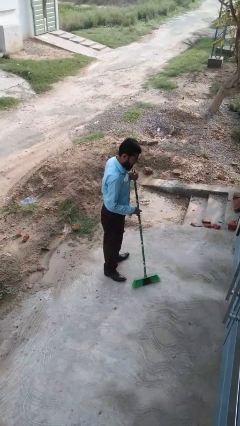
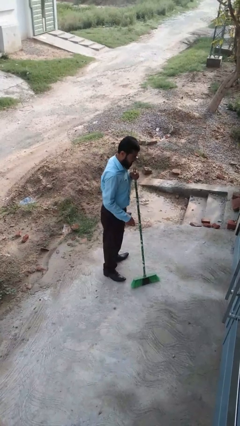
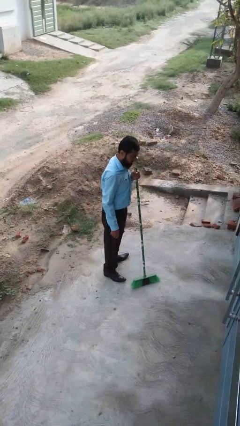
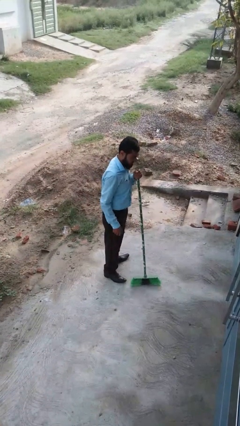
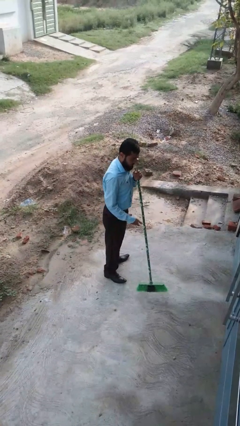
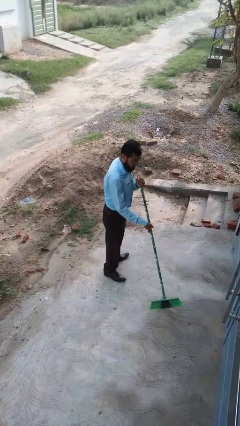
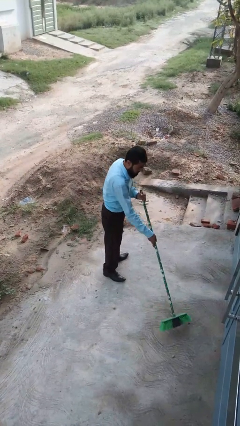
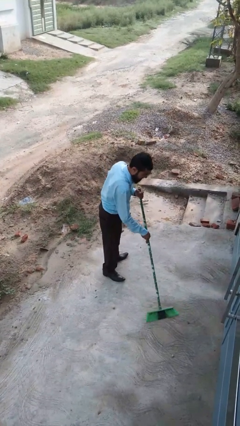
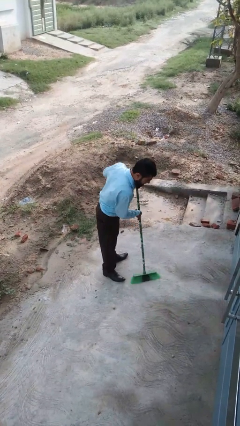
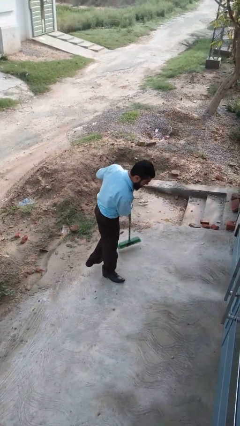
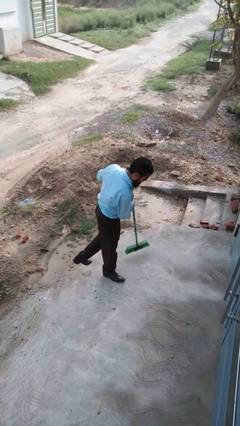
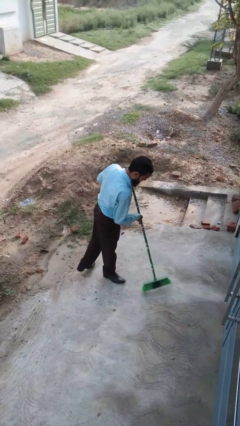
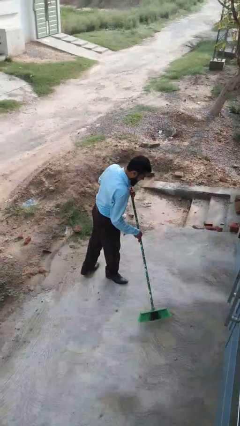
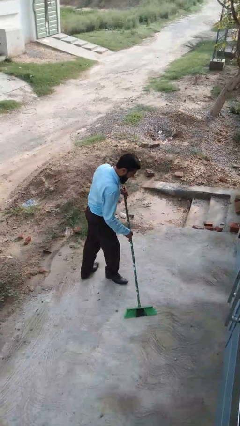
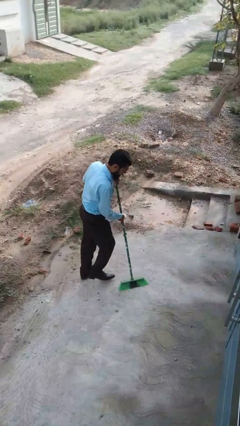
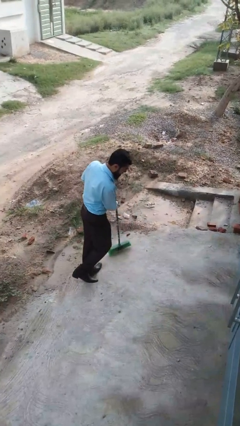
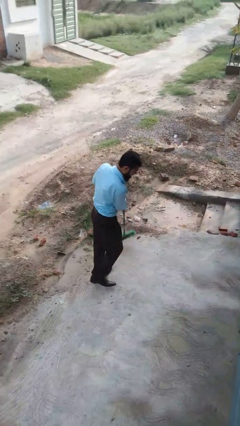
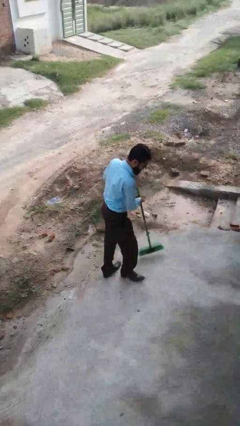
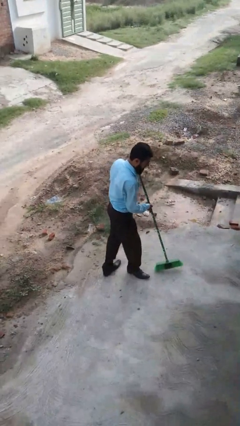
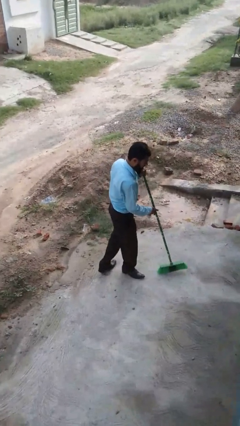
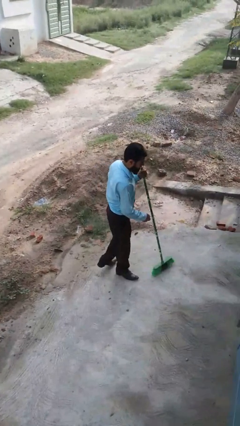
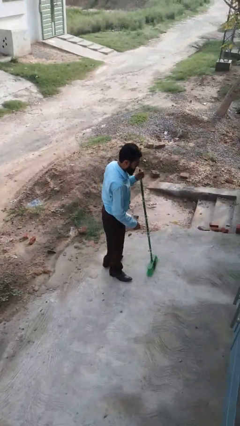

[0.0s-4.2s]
person sweeps floor

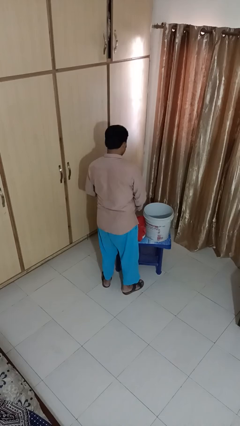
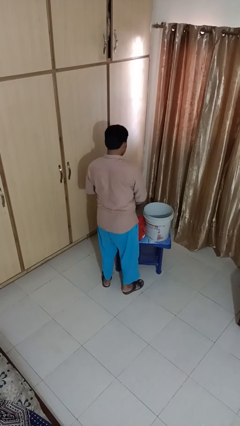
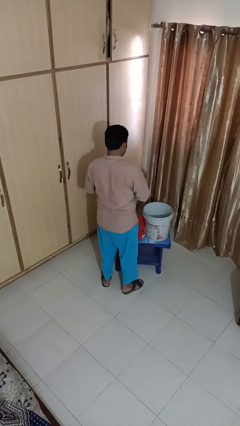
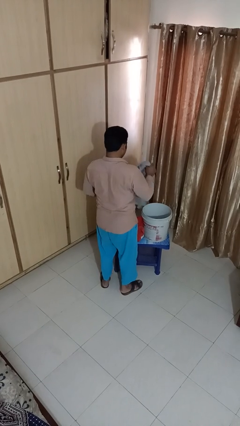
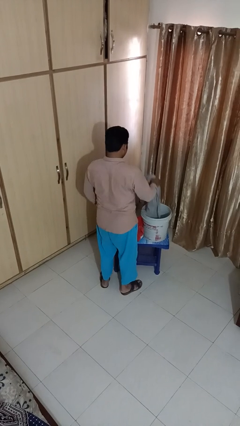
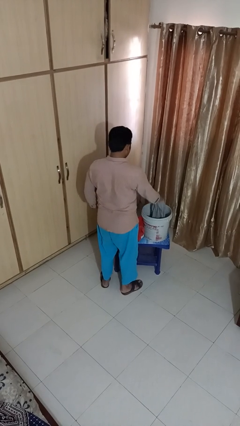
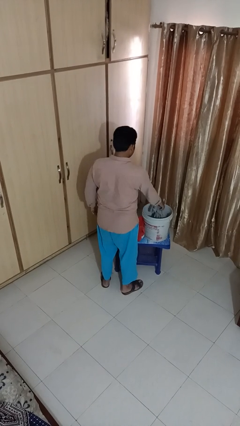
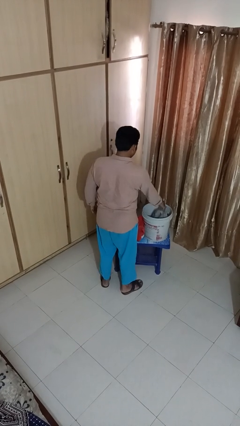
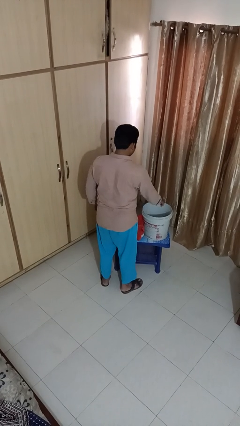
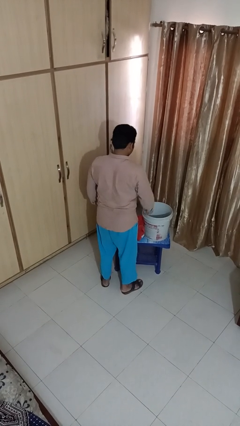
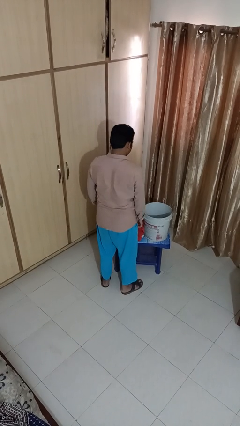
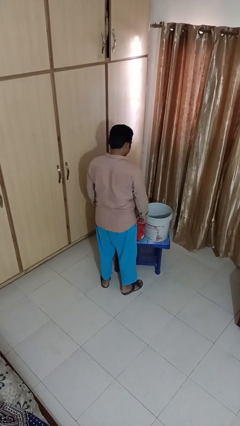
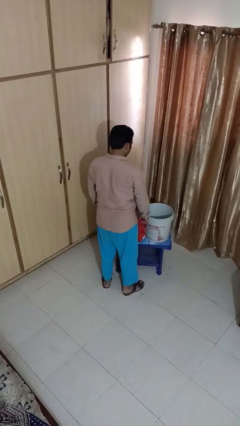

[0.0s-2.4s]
person puts object into basket

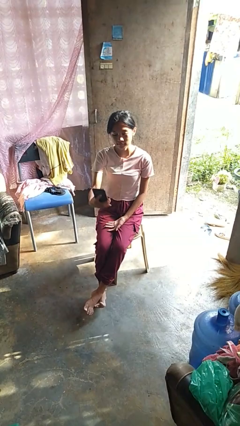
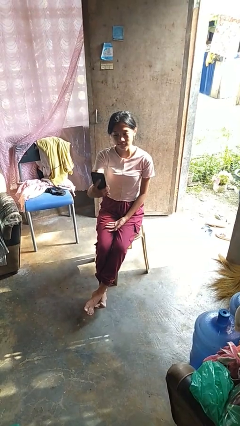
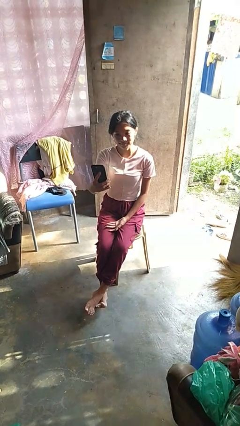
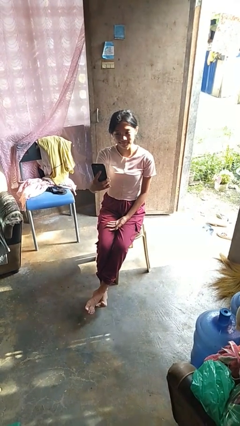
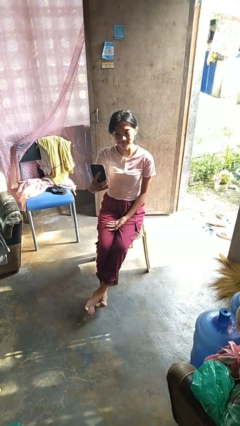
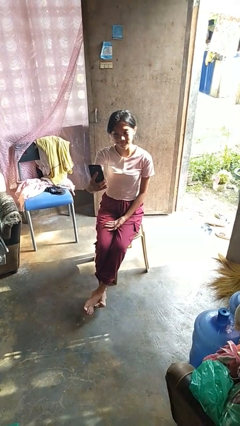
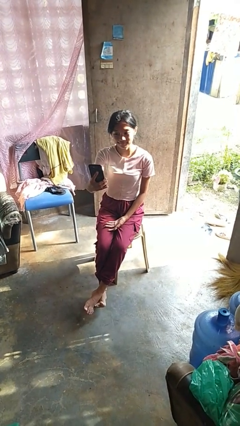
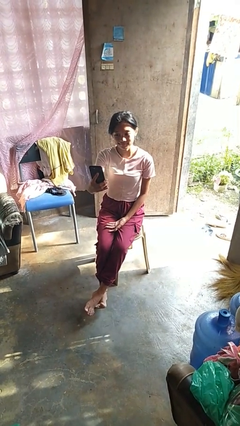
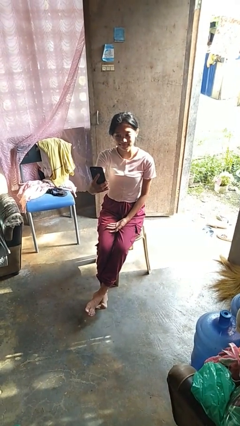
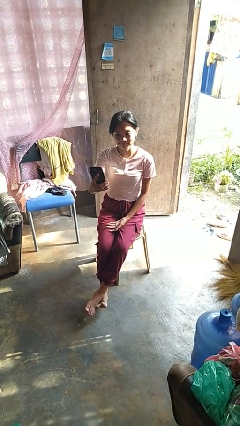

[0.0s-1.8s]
person takes selfie

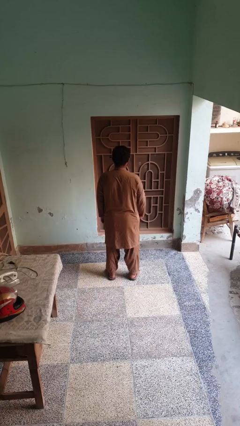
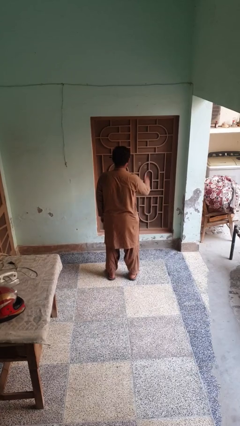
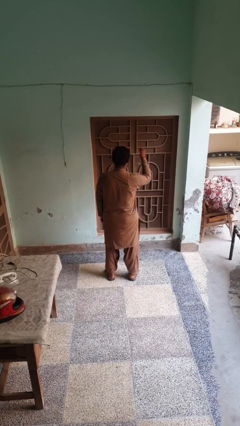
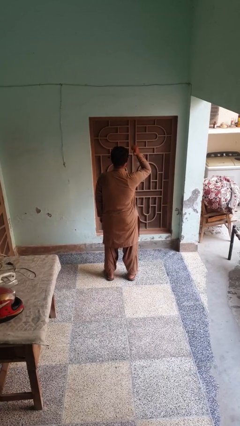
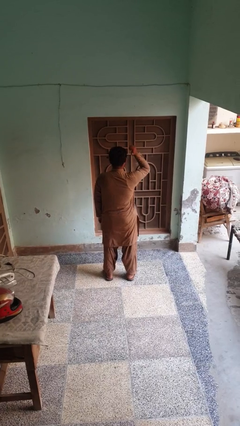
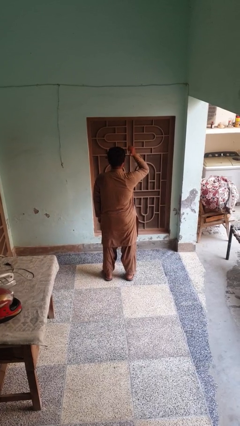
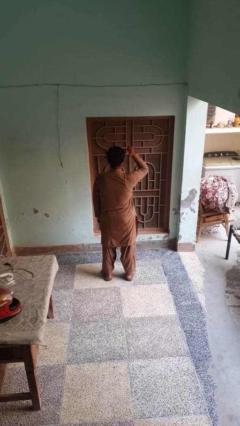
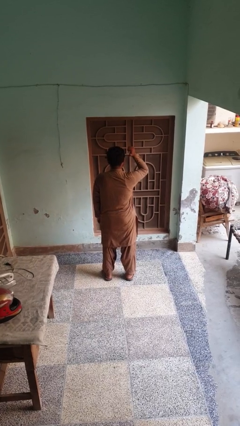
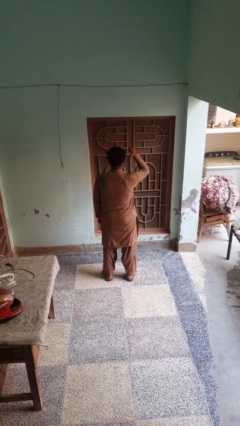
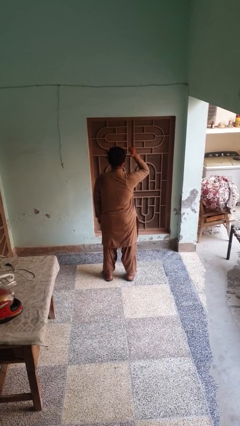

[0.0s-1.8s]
person gestures behind me

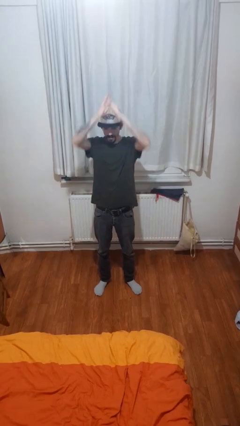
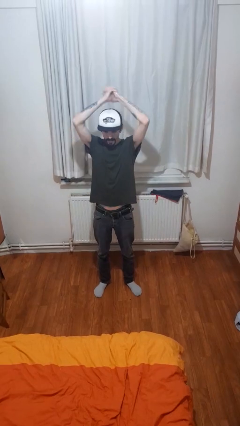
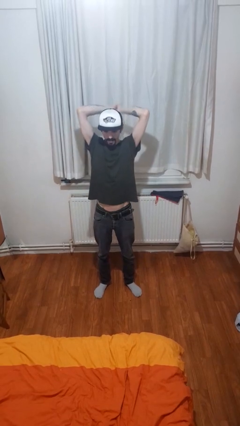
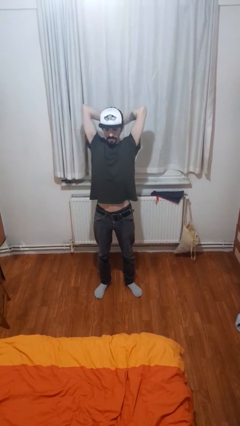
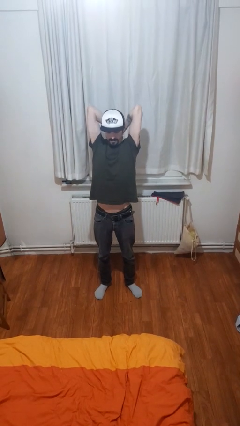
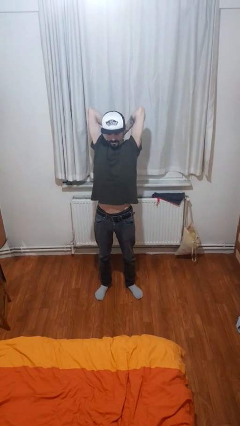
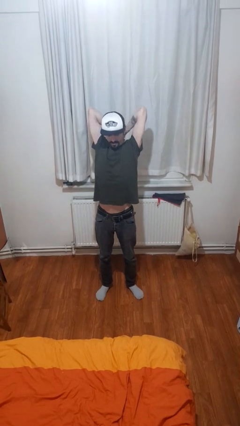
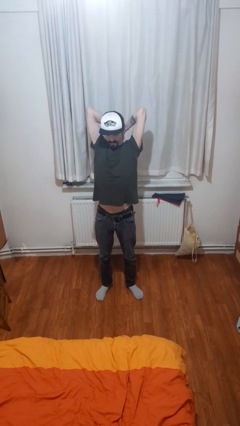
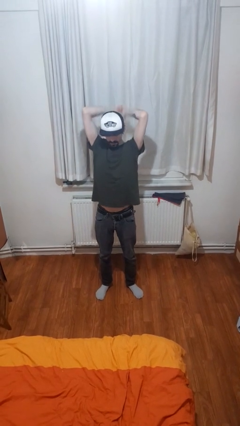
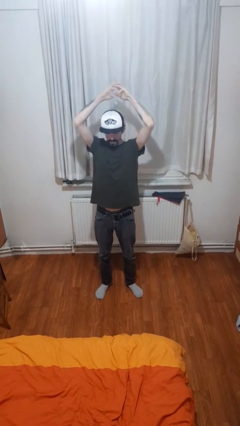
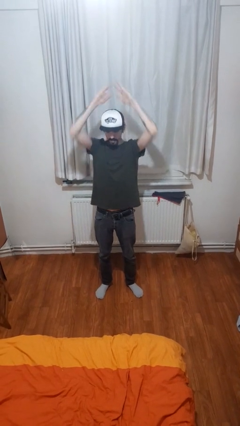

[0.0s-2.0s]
person stretches arms over head

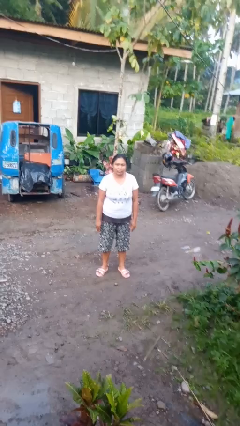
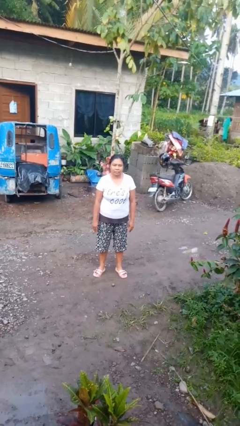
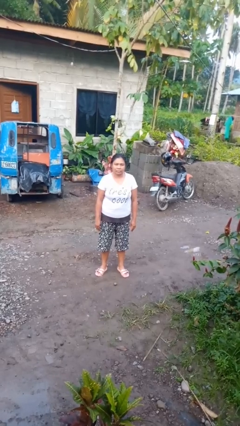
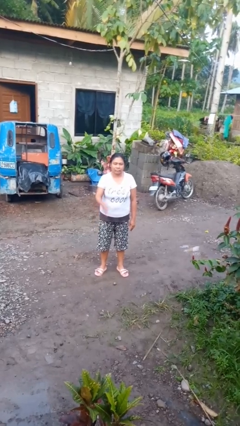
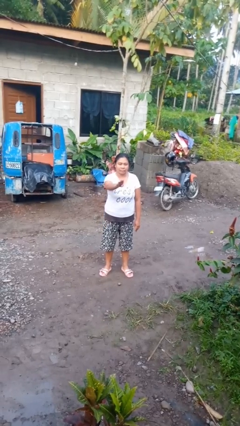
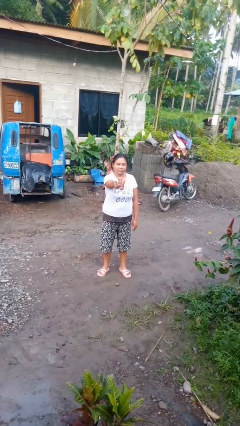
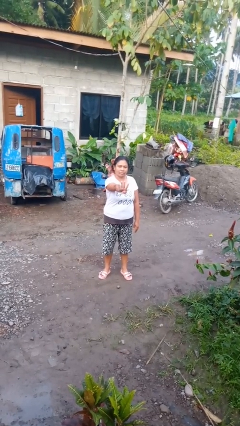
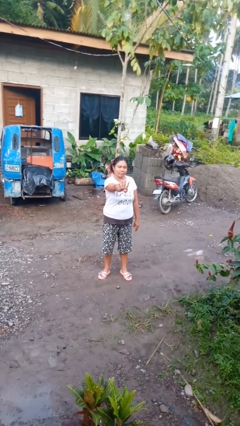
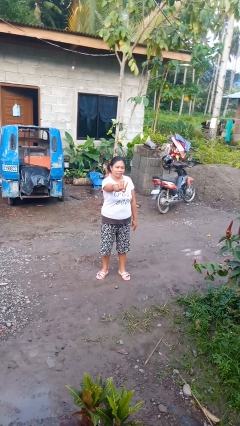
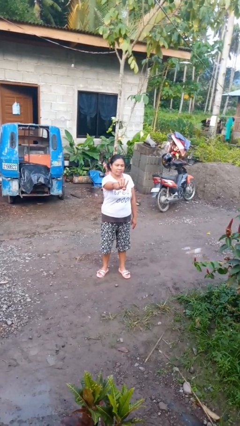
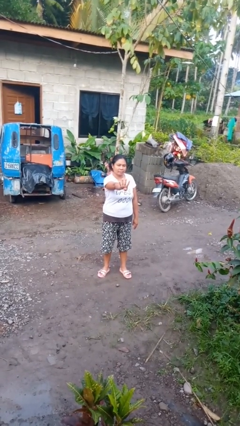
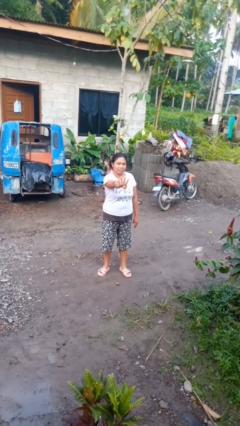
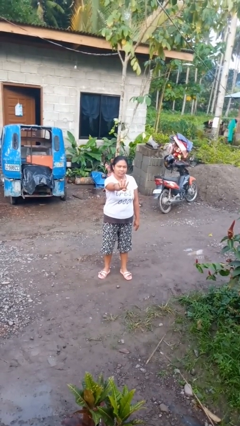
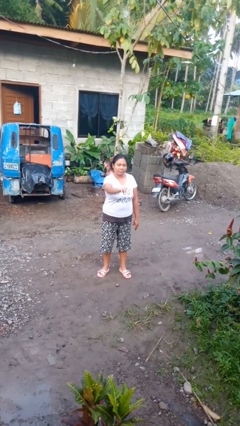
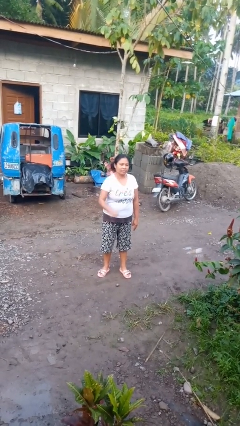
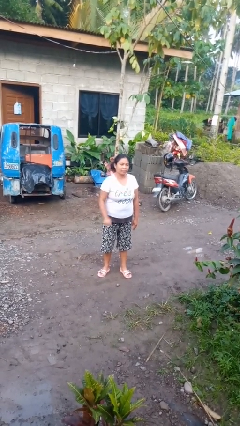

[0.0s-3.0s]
person gestures number four

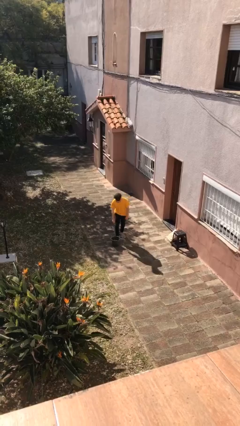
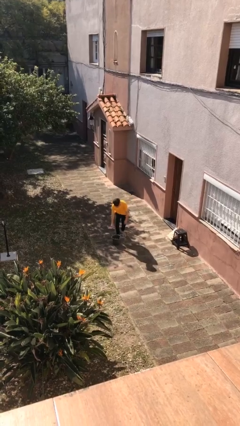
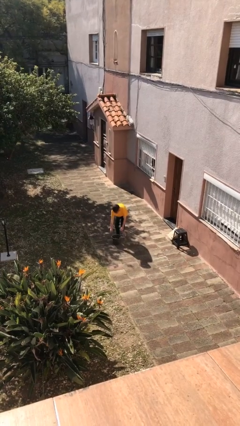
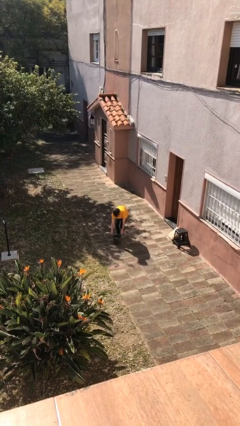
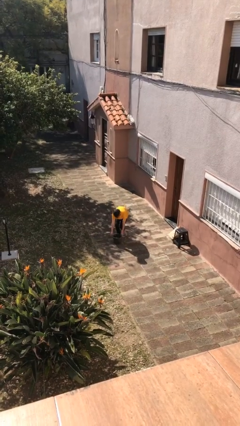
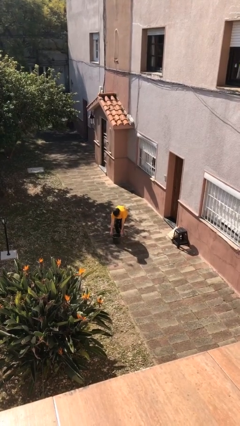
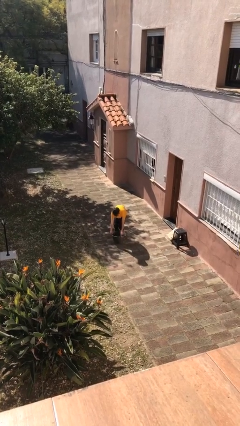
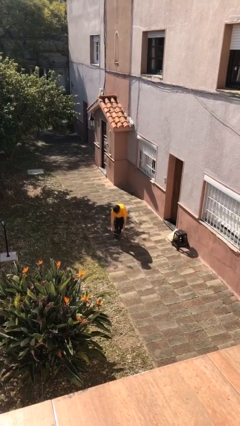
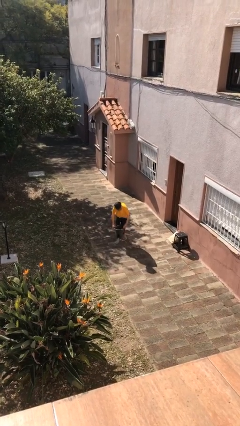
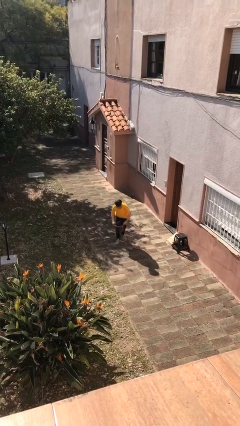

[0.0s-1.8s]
person picks up object from floor
